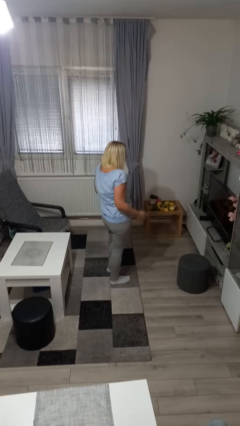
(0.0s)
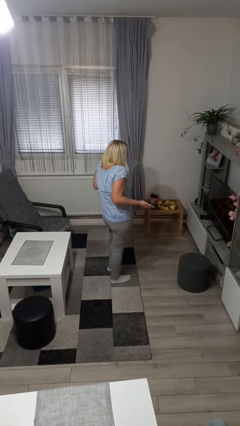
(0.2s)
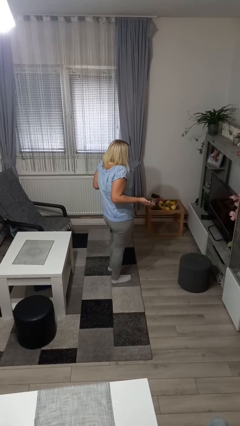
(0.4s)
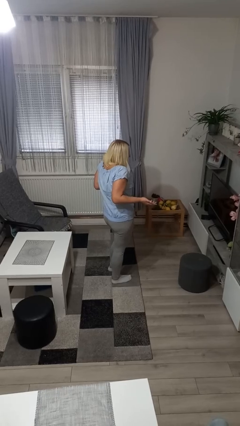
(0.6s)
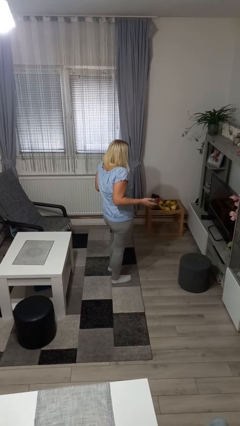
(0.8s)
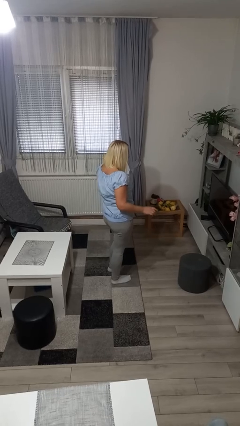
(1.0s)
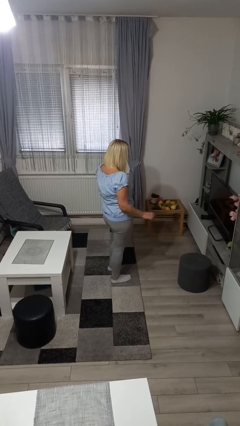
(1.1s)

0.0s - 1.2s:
person shrugs

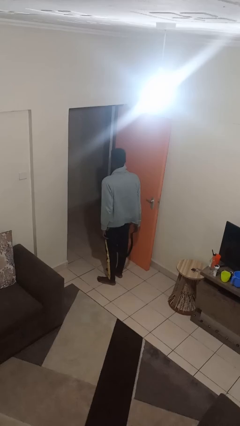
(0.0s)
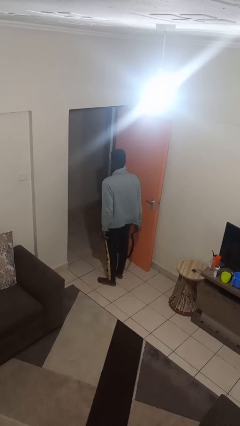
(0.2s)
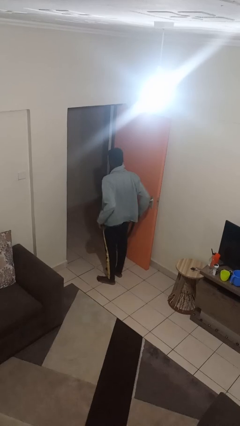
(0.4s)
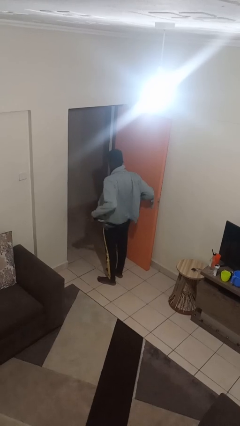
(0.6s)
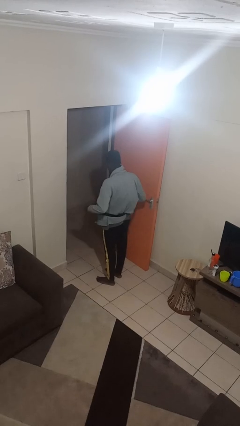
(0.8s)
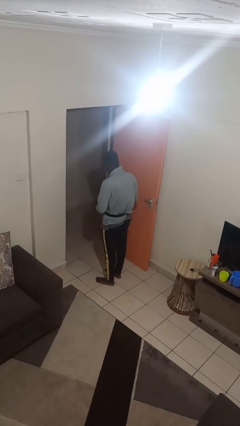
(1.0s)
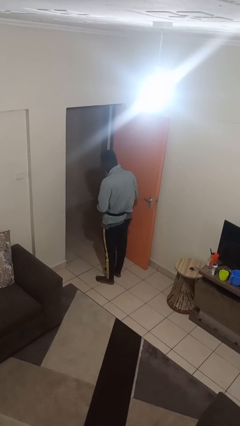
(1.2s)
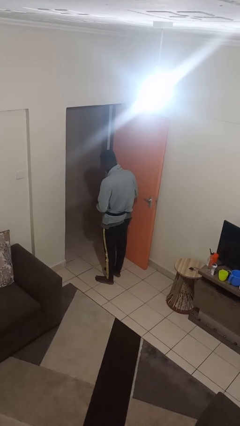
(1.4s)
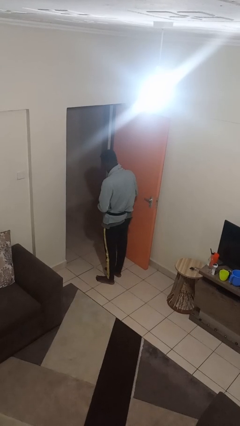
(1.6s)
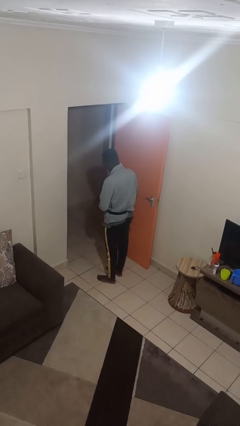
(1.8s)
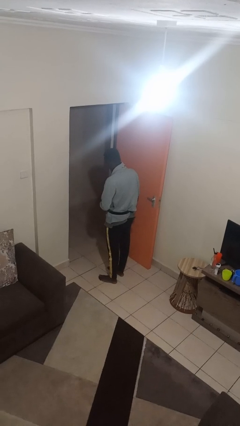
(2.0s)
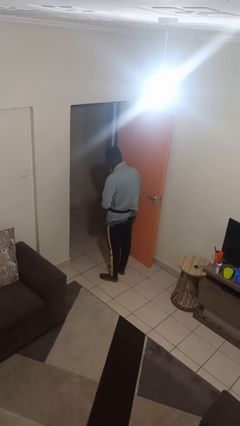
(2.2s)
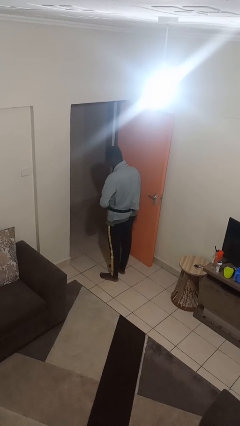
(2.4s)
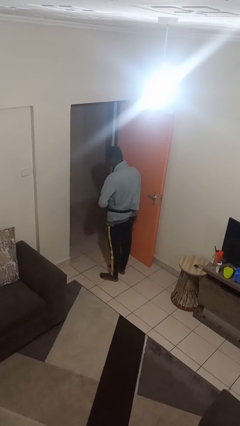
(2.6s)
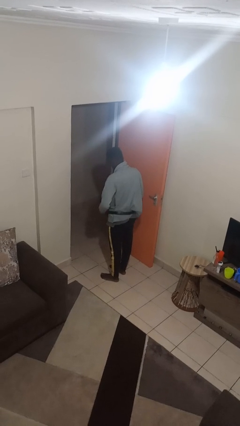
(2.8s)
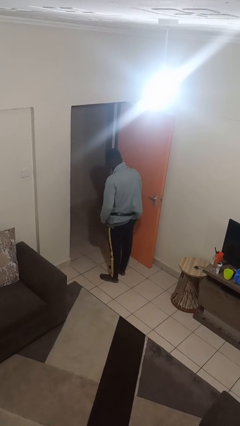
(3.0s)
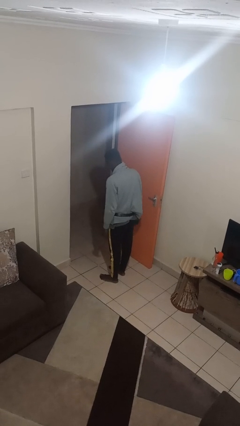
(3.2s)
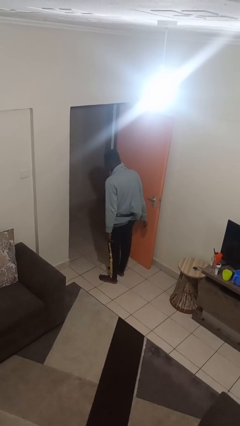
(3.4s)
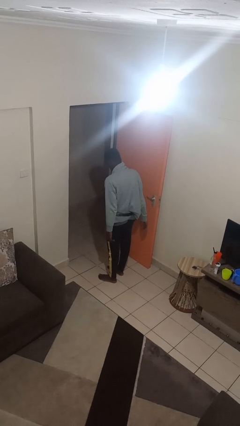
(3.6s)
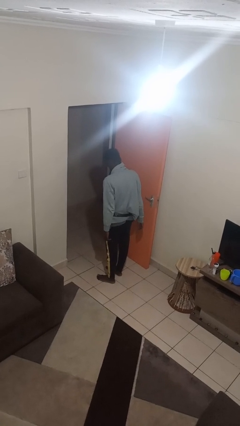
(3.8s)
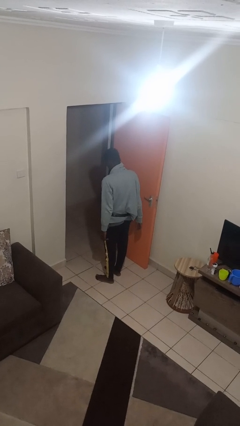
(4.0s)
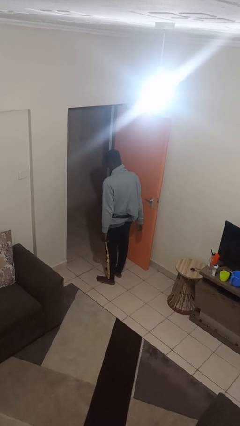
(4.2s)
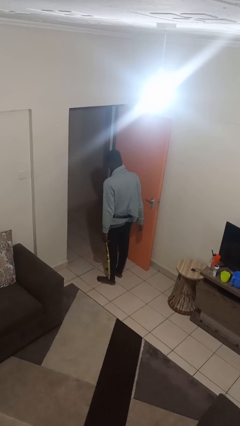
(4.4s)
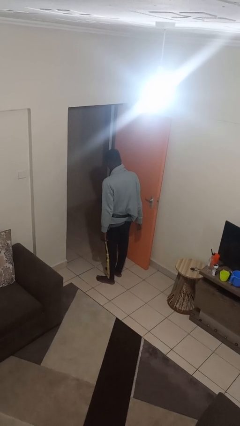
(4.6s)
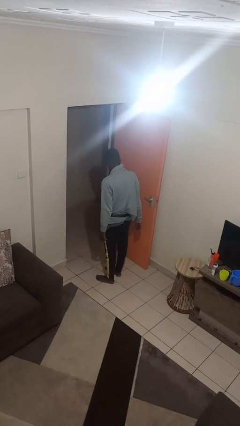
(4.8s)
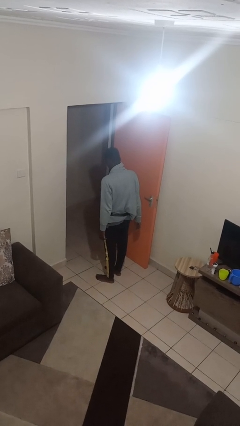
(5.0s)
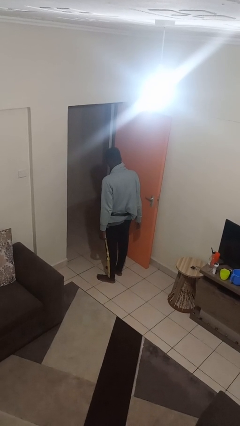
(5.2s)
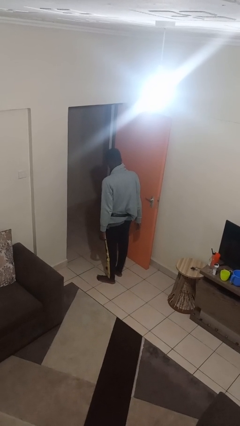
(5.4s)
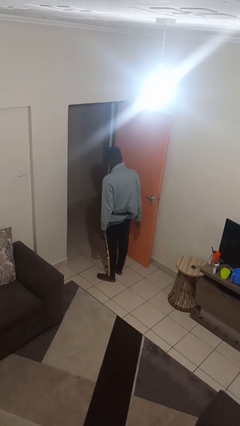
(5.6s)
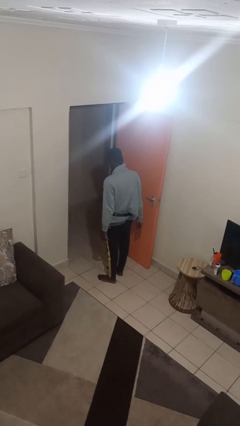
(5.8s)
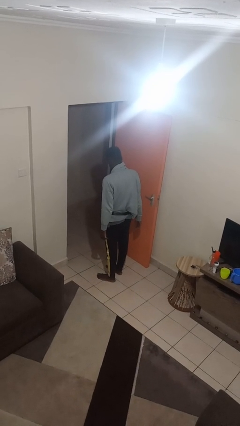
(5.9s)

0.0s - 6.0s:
person puts on belt

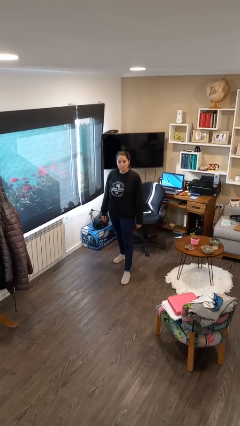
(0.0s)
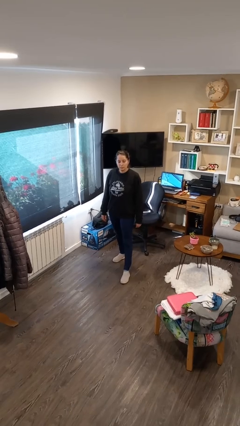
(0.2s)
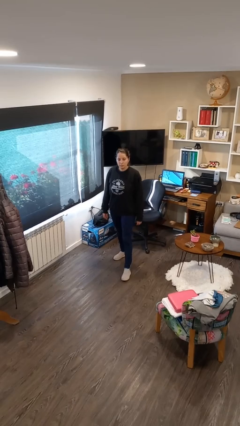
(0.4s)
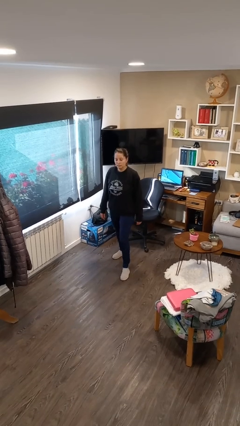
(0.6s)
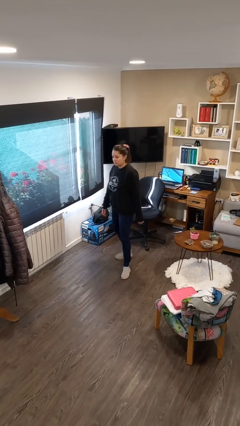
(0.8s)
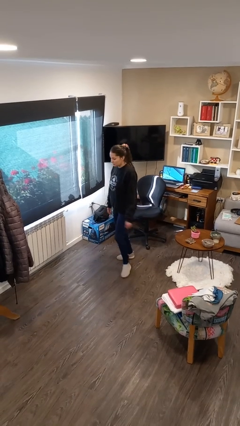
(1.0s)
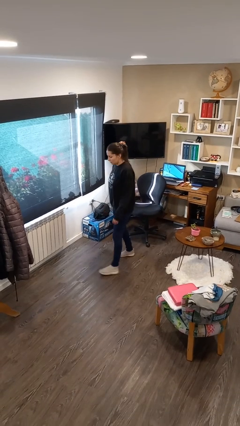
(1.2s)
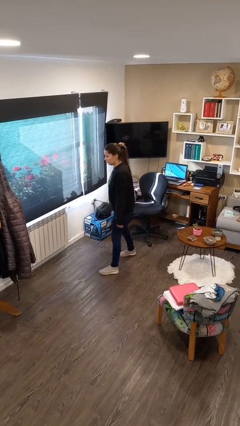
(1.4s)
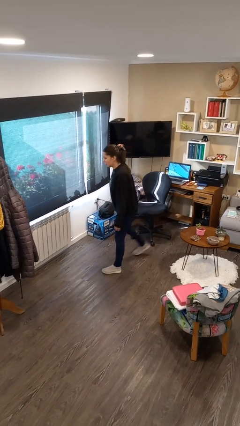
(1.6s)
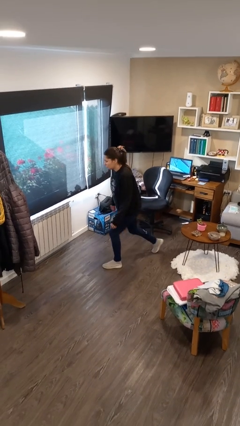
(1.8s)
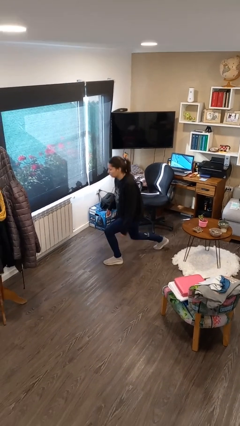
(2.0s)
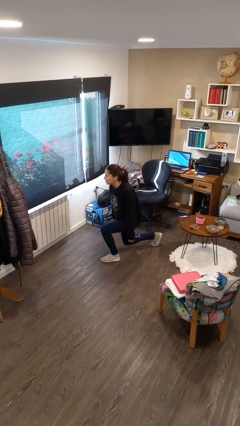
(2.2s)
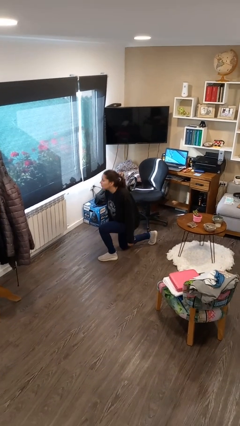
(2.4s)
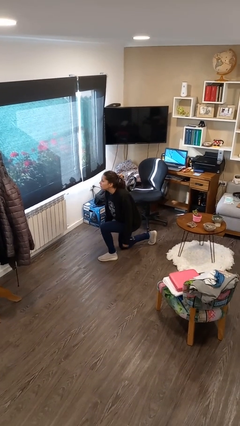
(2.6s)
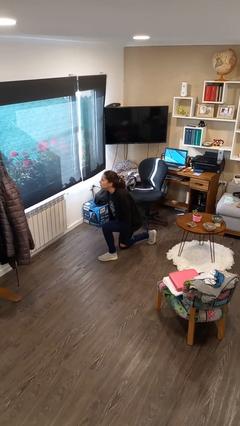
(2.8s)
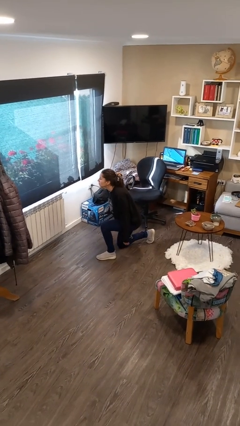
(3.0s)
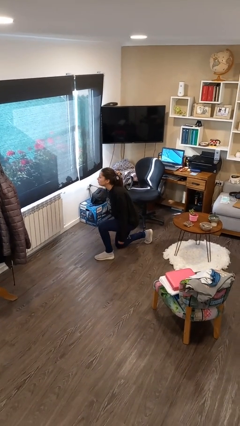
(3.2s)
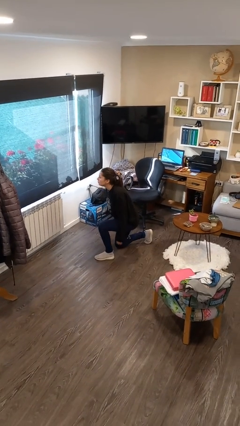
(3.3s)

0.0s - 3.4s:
person kneels

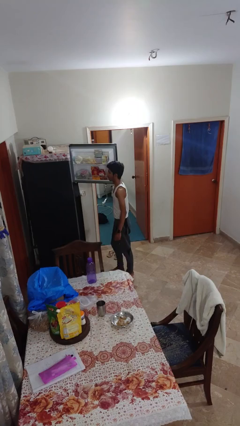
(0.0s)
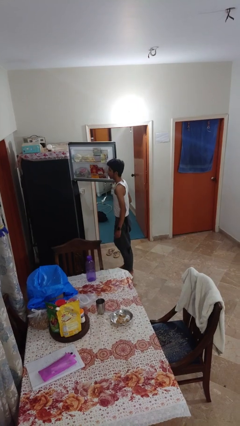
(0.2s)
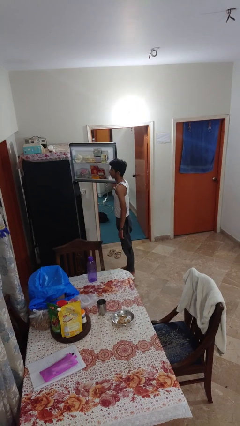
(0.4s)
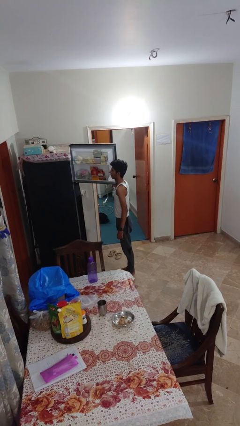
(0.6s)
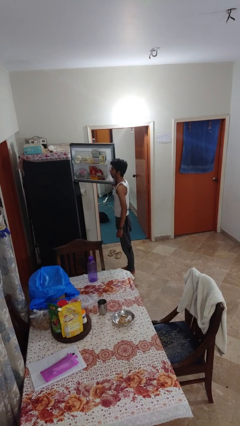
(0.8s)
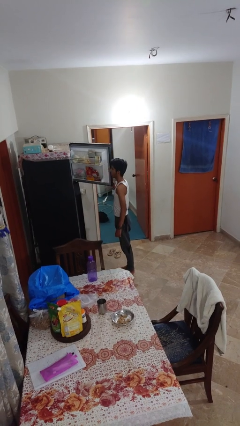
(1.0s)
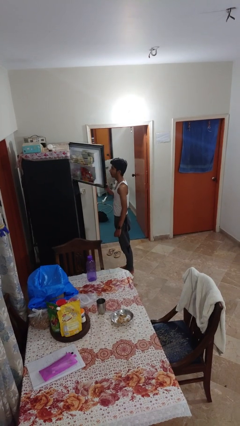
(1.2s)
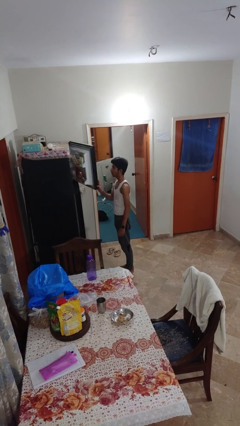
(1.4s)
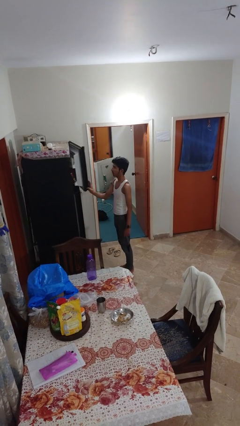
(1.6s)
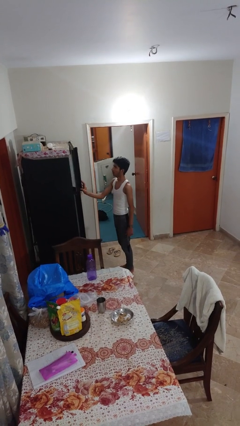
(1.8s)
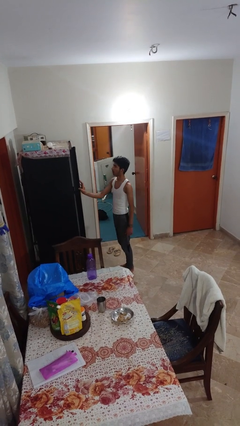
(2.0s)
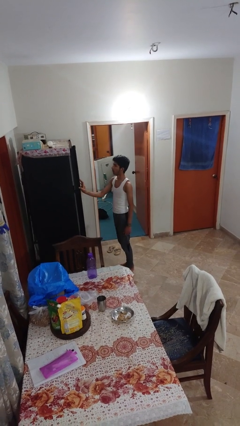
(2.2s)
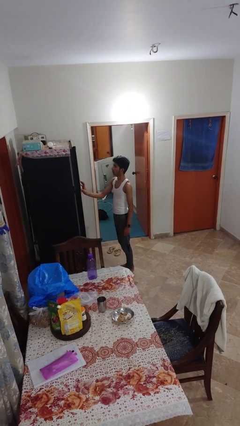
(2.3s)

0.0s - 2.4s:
person closes refrigerator

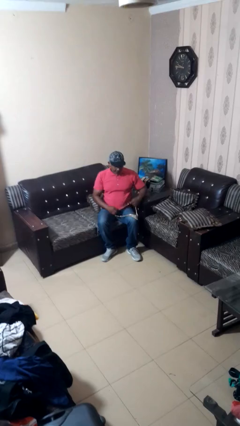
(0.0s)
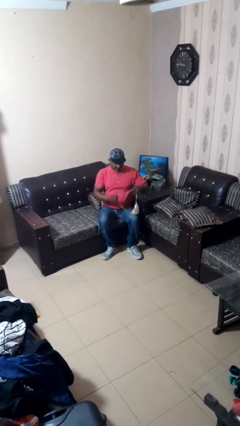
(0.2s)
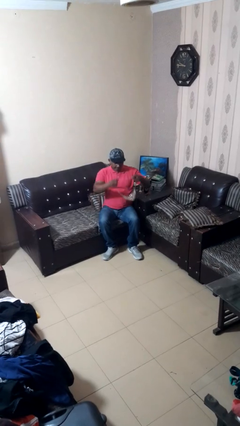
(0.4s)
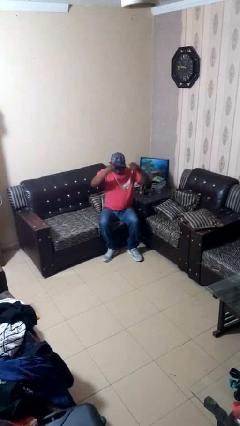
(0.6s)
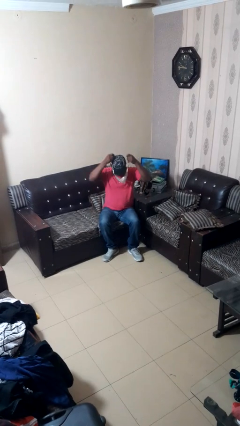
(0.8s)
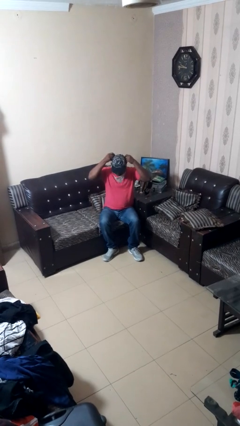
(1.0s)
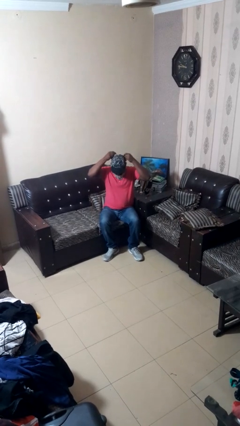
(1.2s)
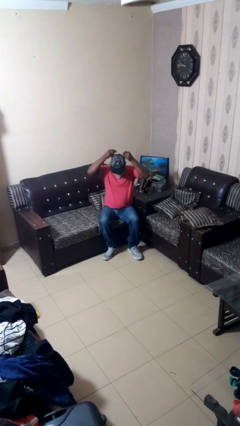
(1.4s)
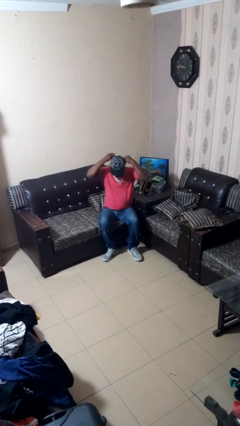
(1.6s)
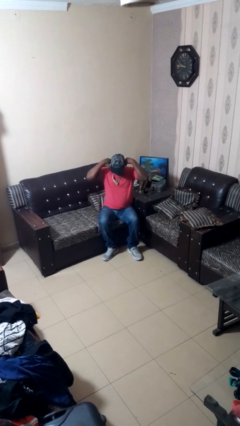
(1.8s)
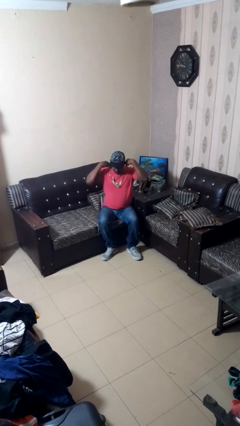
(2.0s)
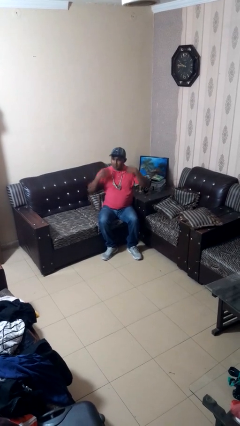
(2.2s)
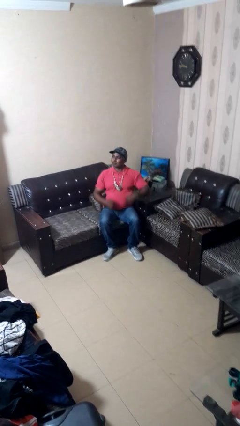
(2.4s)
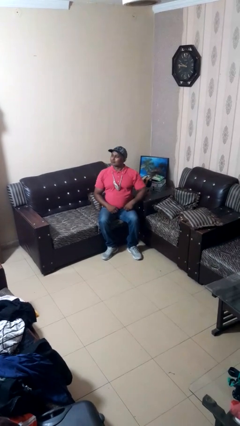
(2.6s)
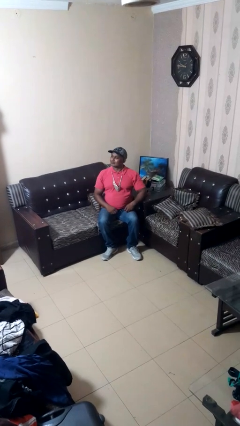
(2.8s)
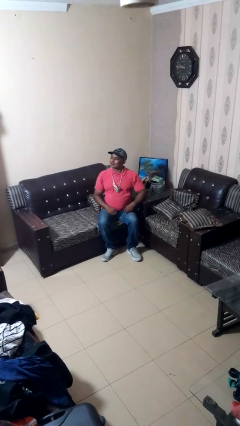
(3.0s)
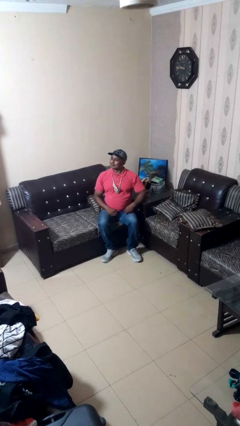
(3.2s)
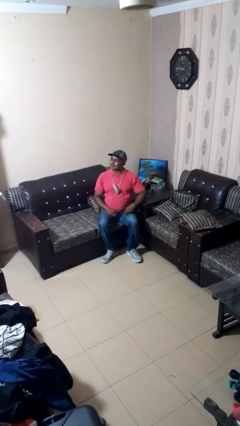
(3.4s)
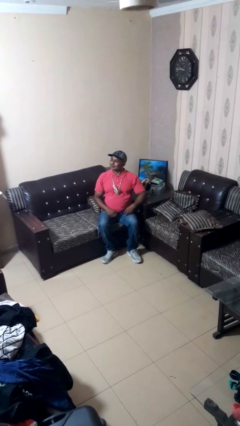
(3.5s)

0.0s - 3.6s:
person puts on necklace

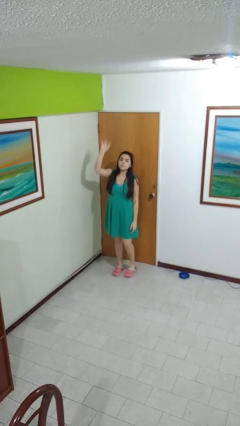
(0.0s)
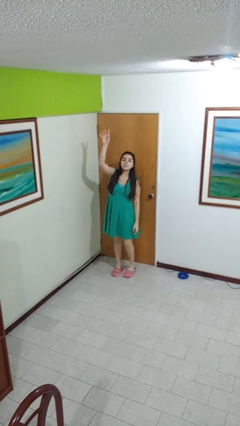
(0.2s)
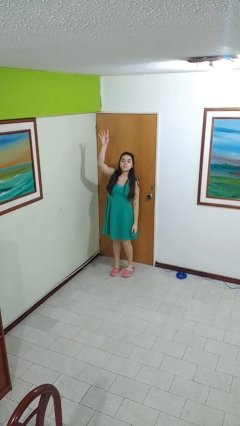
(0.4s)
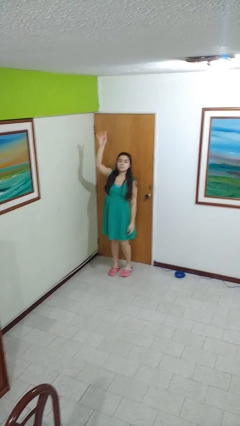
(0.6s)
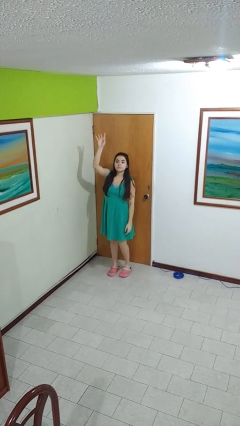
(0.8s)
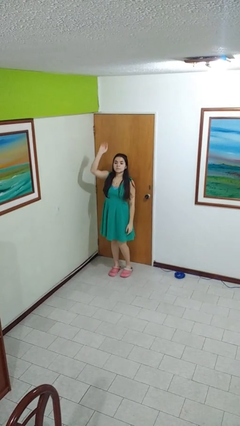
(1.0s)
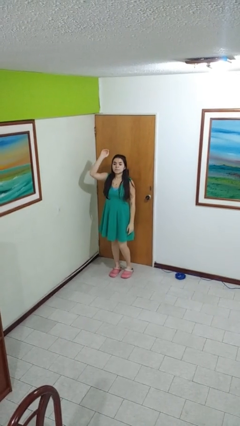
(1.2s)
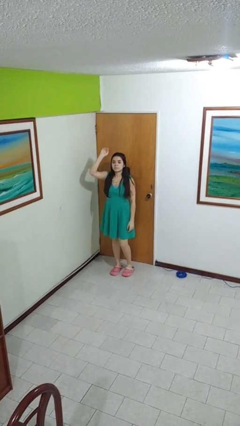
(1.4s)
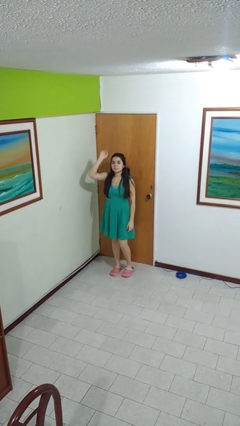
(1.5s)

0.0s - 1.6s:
person gestures raise hand
